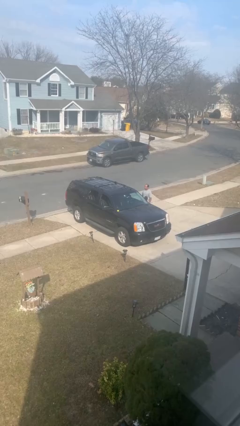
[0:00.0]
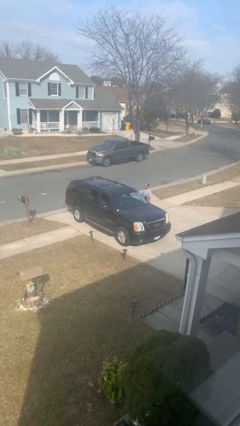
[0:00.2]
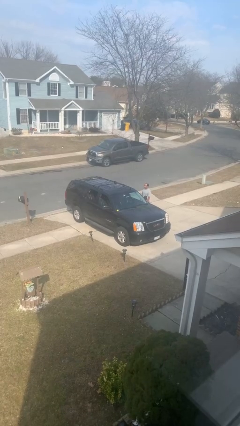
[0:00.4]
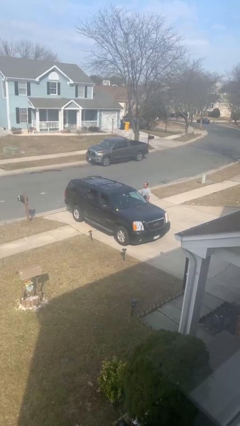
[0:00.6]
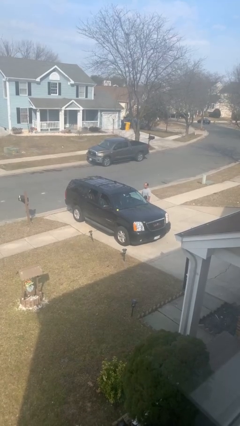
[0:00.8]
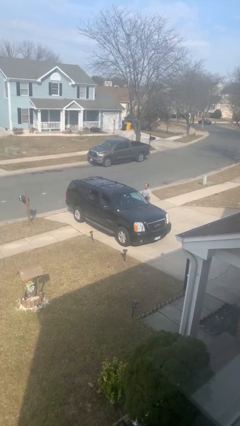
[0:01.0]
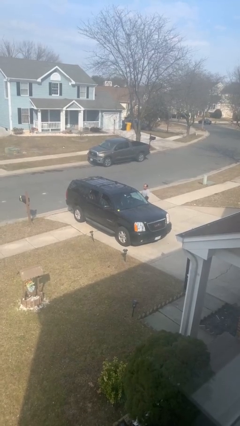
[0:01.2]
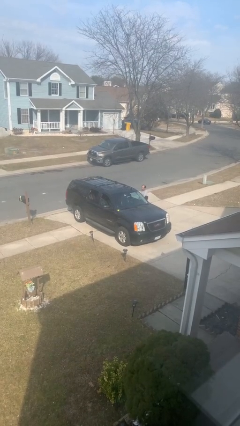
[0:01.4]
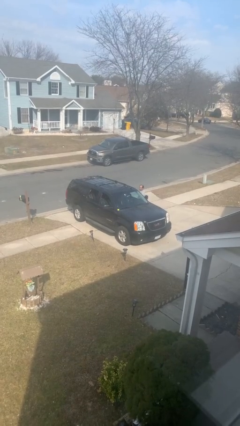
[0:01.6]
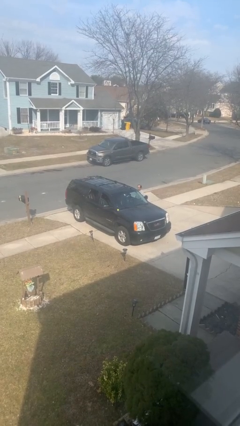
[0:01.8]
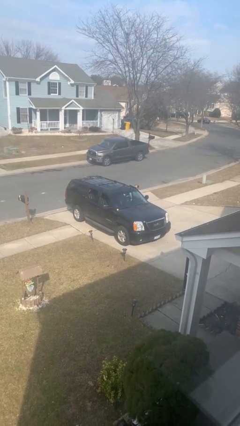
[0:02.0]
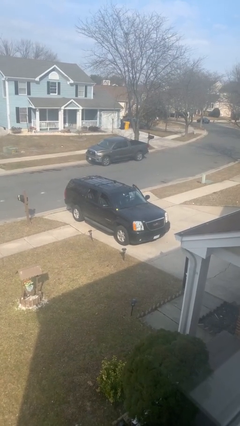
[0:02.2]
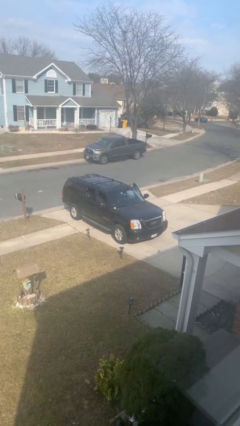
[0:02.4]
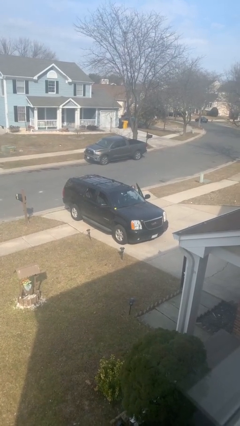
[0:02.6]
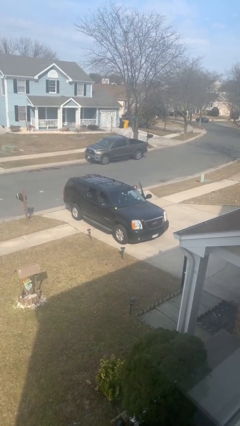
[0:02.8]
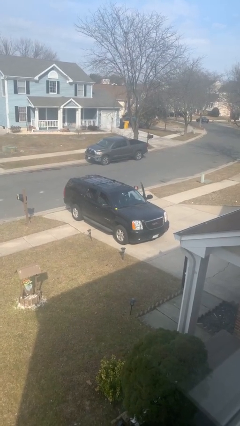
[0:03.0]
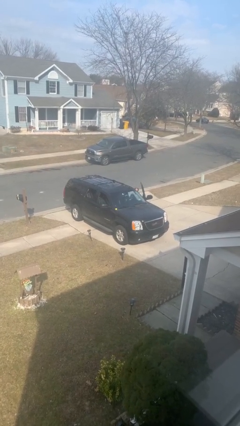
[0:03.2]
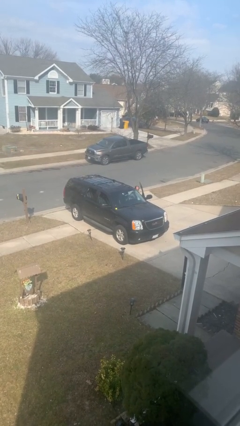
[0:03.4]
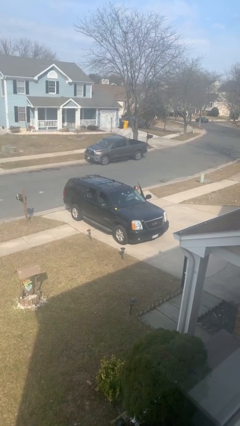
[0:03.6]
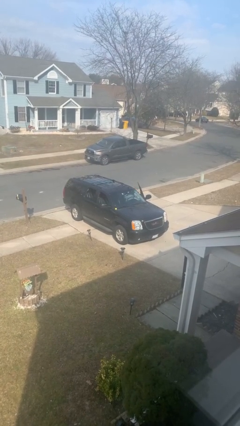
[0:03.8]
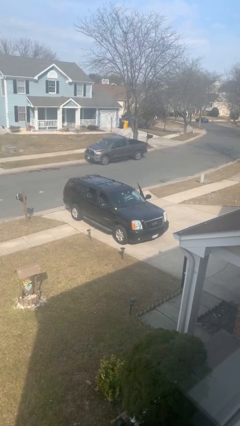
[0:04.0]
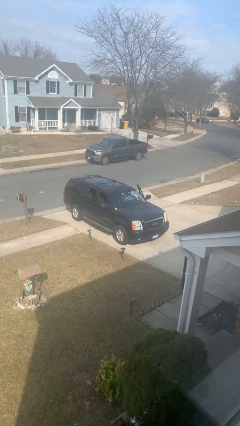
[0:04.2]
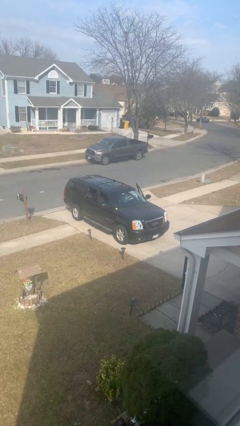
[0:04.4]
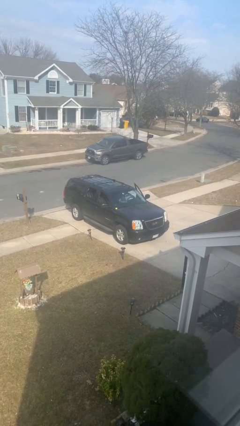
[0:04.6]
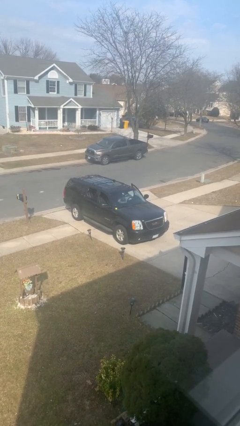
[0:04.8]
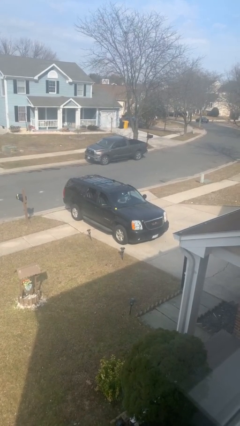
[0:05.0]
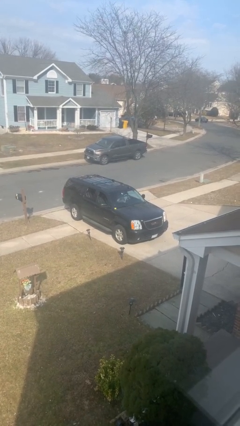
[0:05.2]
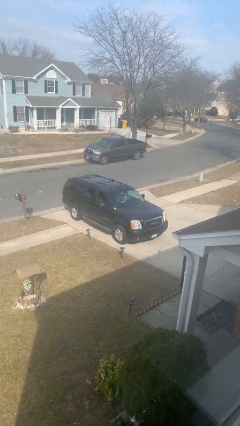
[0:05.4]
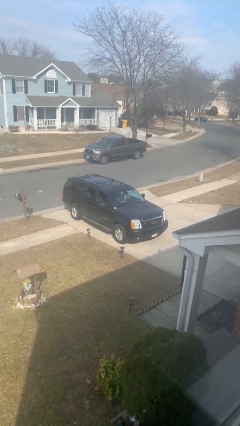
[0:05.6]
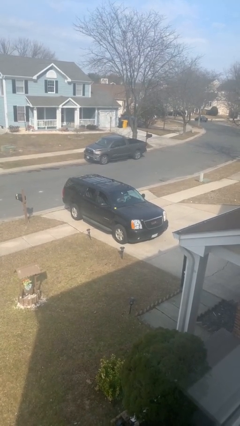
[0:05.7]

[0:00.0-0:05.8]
car picks up person

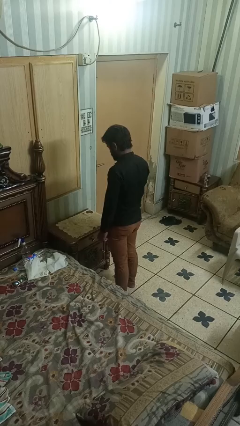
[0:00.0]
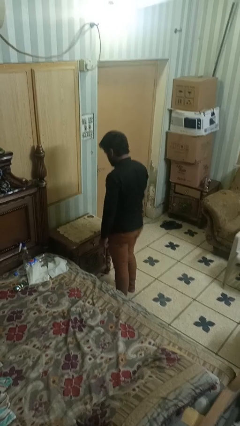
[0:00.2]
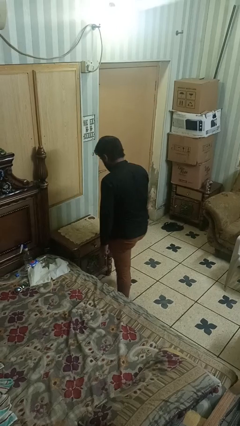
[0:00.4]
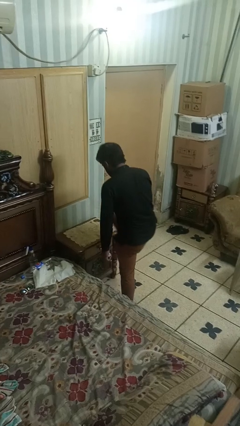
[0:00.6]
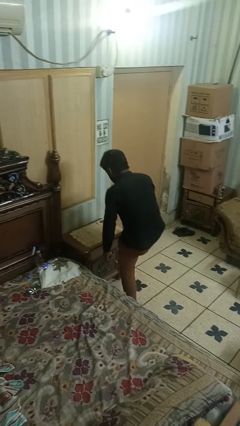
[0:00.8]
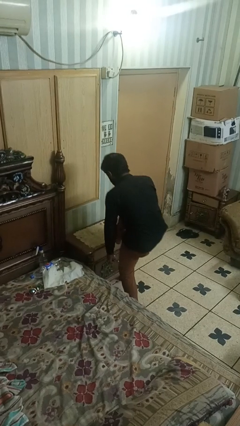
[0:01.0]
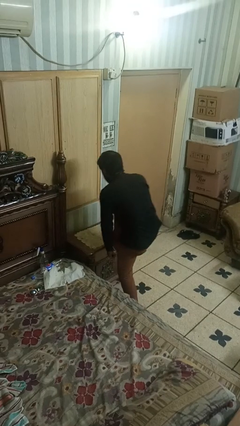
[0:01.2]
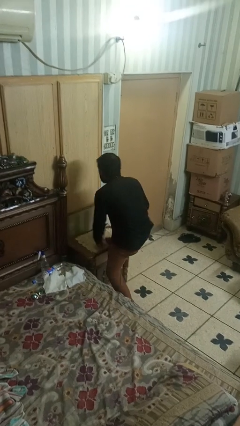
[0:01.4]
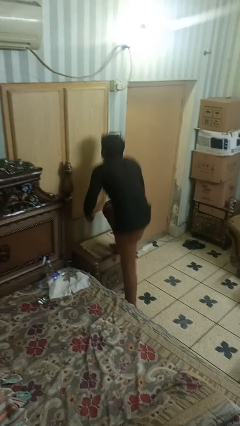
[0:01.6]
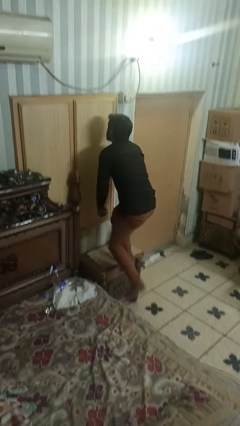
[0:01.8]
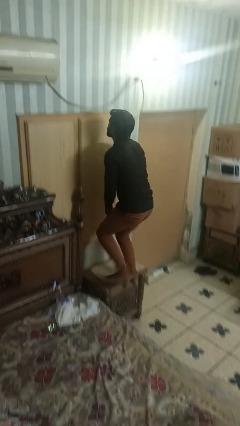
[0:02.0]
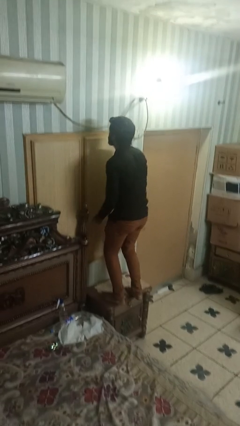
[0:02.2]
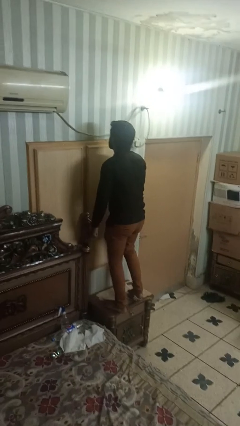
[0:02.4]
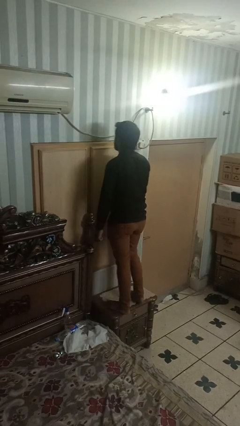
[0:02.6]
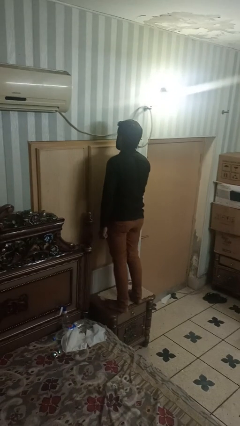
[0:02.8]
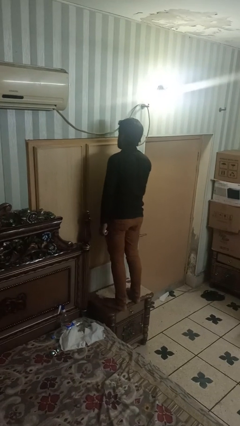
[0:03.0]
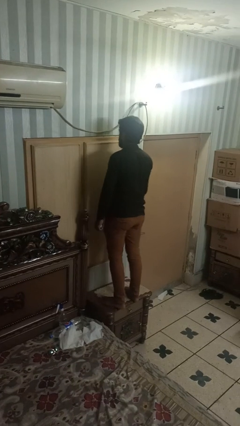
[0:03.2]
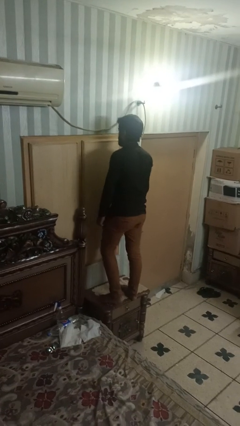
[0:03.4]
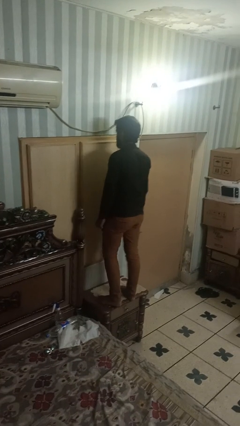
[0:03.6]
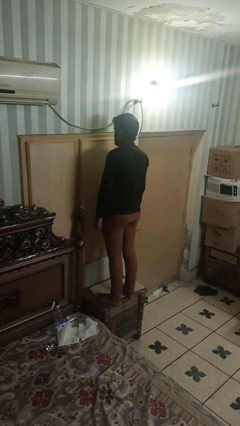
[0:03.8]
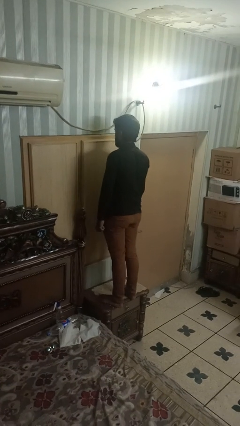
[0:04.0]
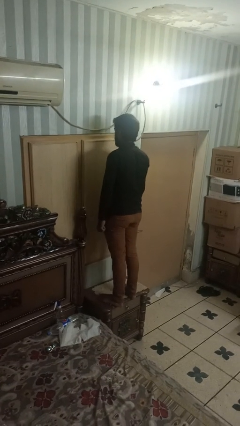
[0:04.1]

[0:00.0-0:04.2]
person climbs on table

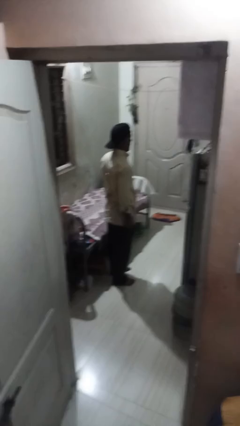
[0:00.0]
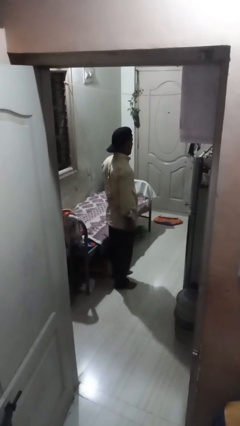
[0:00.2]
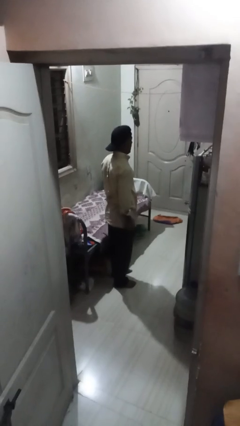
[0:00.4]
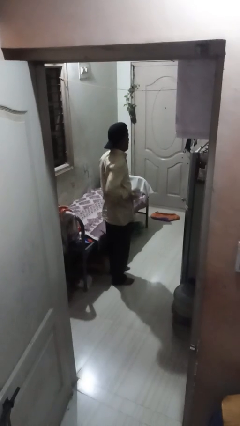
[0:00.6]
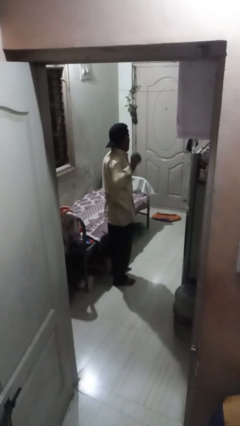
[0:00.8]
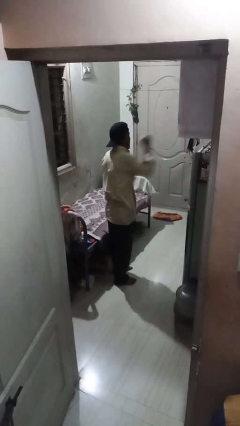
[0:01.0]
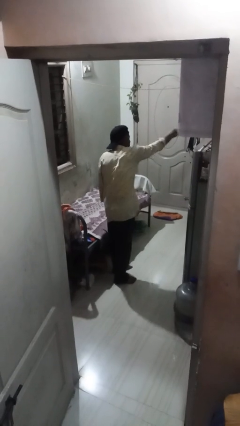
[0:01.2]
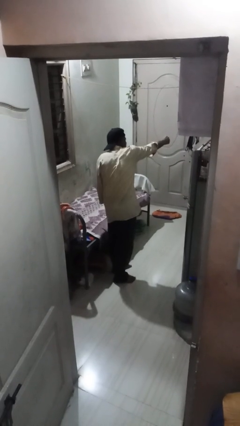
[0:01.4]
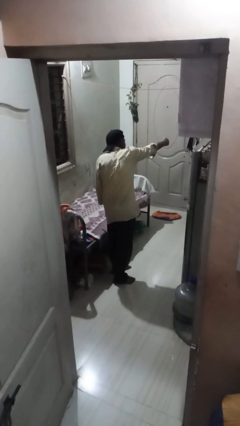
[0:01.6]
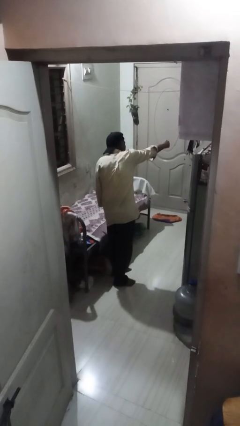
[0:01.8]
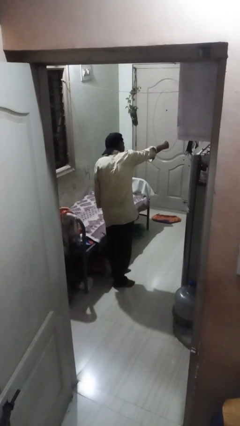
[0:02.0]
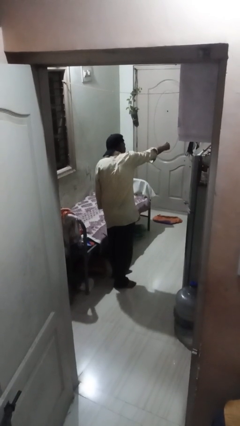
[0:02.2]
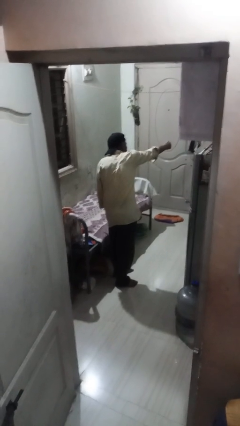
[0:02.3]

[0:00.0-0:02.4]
person punches

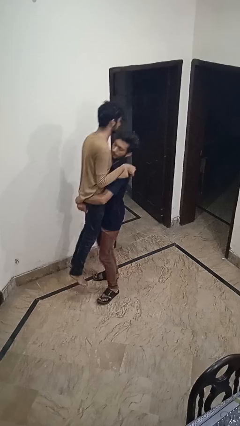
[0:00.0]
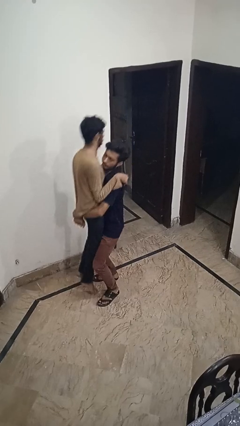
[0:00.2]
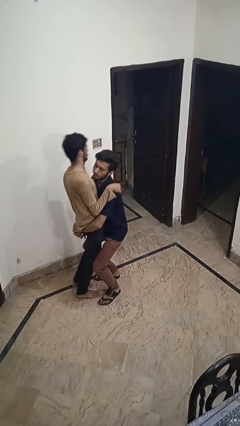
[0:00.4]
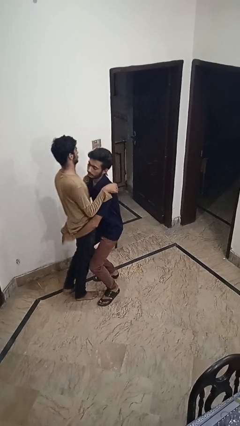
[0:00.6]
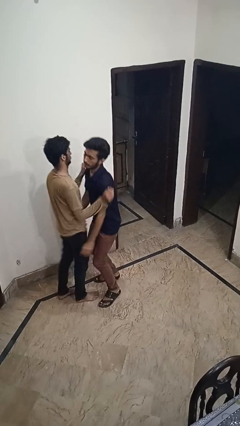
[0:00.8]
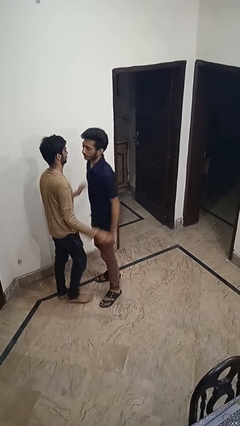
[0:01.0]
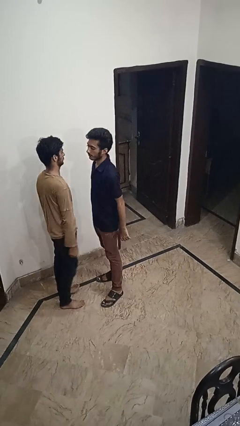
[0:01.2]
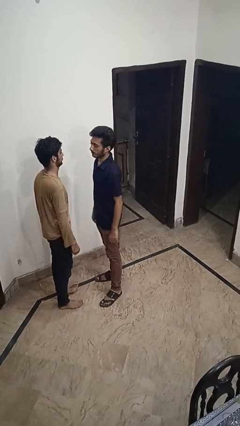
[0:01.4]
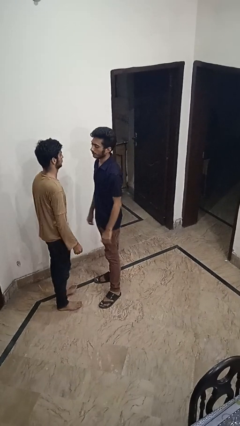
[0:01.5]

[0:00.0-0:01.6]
person puts down person

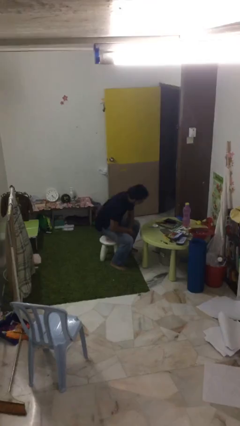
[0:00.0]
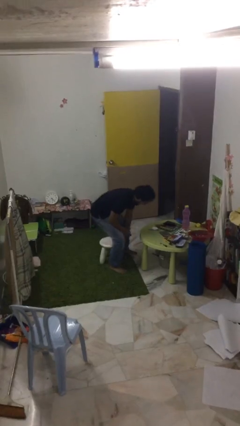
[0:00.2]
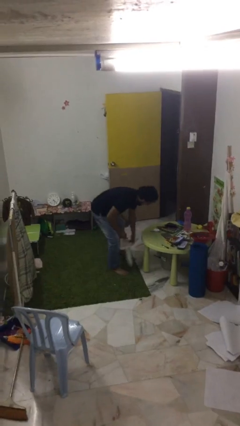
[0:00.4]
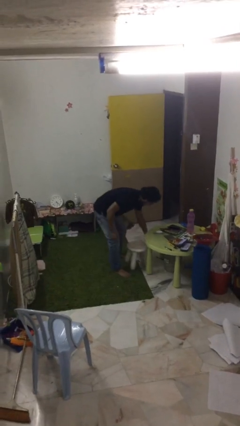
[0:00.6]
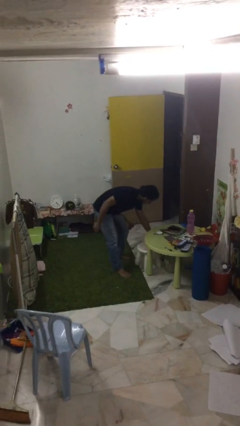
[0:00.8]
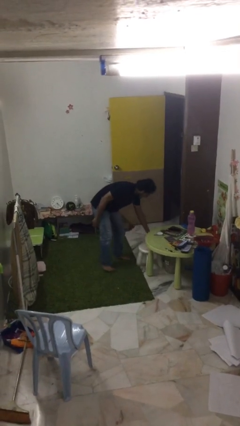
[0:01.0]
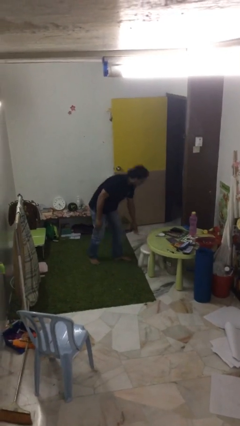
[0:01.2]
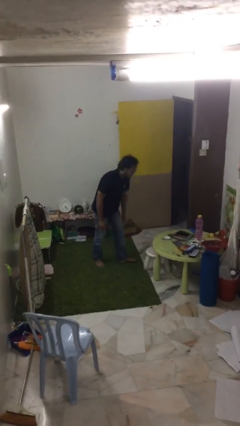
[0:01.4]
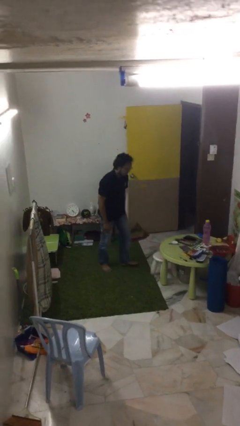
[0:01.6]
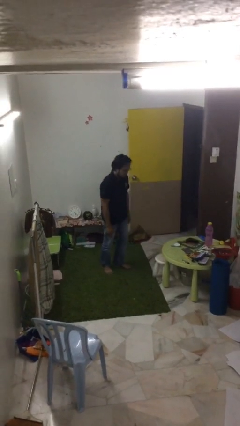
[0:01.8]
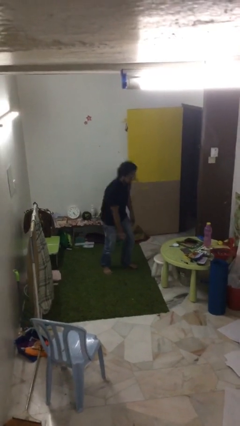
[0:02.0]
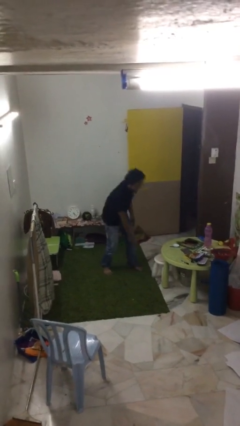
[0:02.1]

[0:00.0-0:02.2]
person stands up

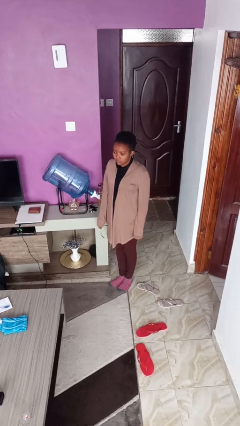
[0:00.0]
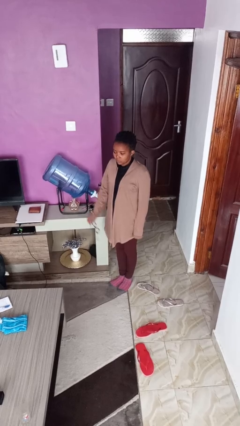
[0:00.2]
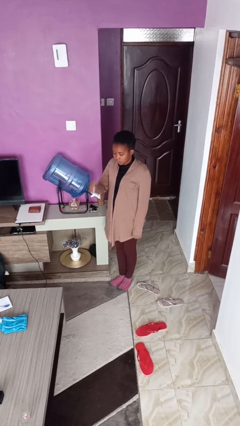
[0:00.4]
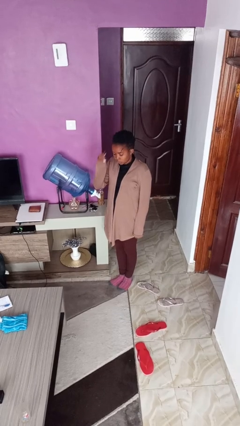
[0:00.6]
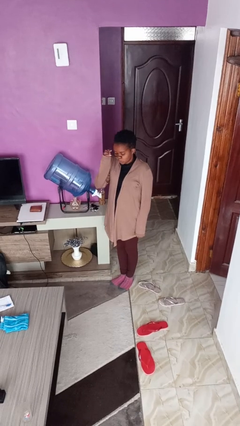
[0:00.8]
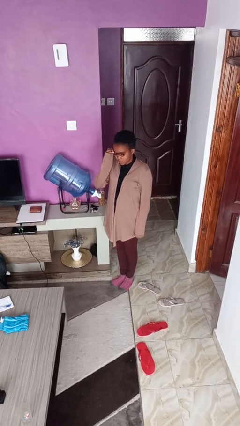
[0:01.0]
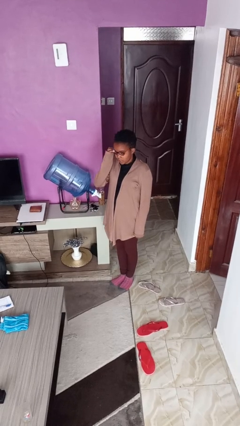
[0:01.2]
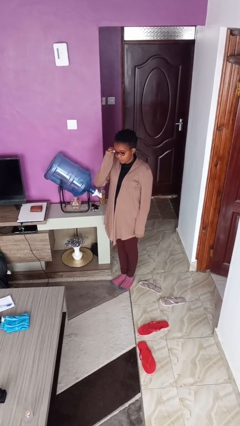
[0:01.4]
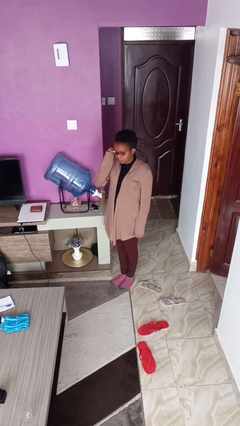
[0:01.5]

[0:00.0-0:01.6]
person puts on glasses
